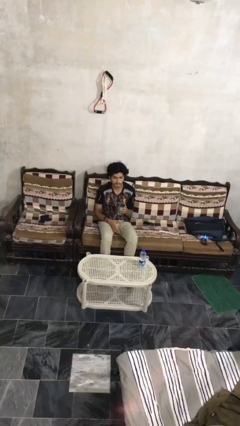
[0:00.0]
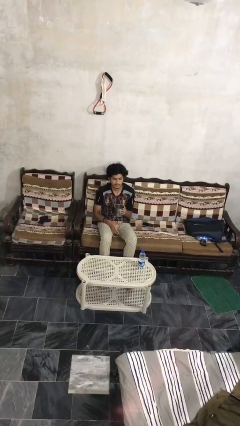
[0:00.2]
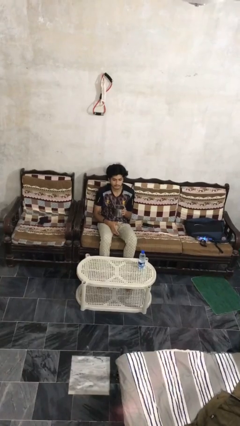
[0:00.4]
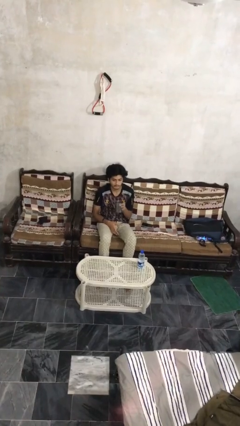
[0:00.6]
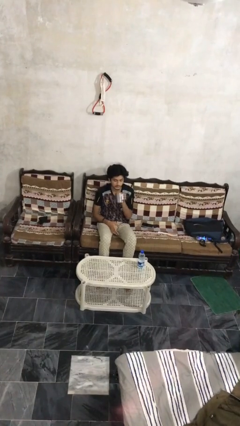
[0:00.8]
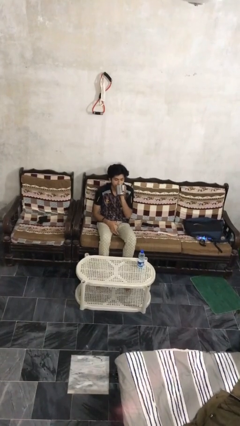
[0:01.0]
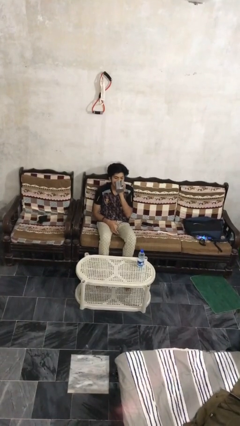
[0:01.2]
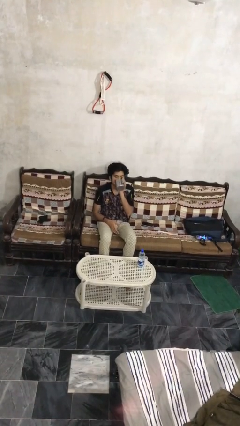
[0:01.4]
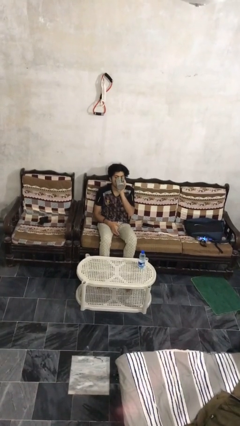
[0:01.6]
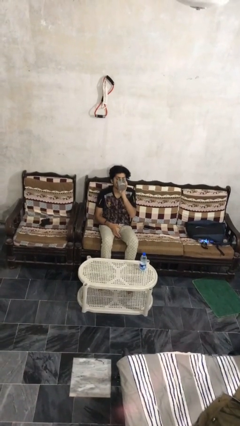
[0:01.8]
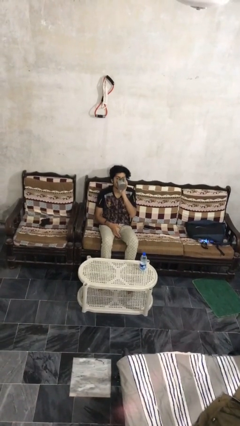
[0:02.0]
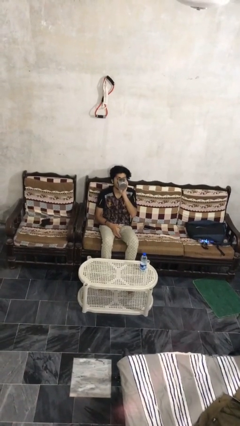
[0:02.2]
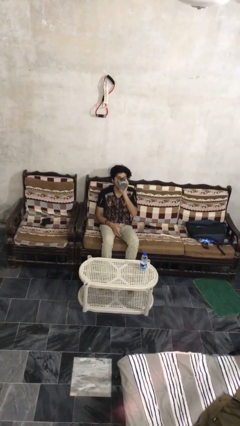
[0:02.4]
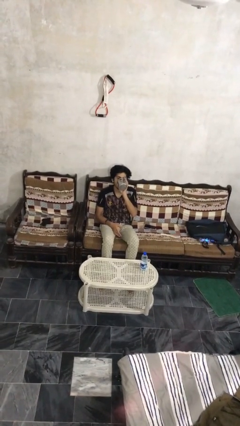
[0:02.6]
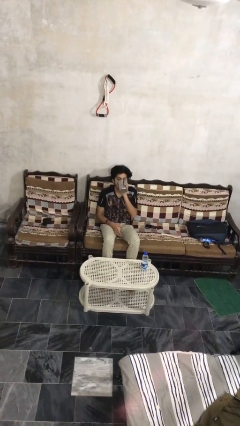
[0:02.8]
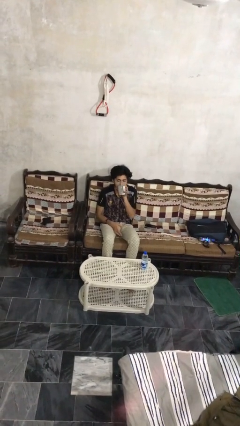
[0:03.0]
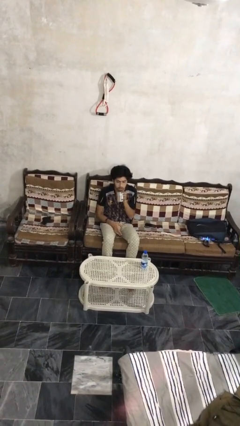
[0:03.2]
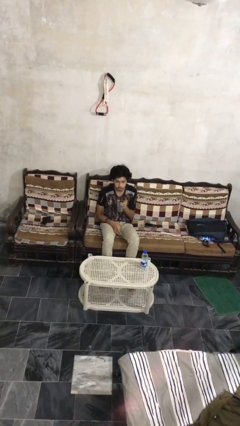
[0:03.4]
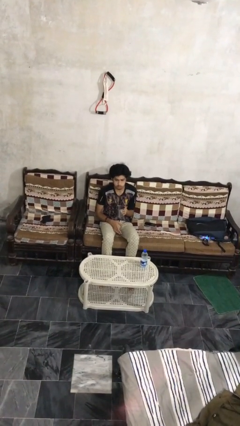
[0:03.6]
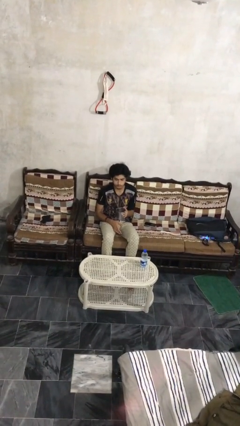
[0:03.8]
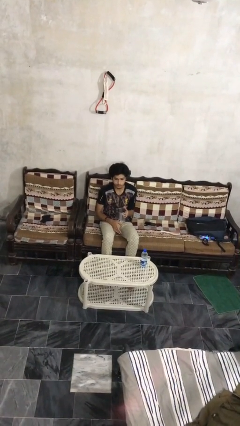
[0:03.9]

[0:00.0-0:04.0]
person drinks from mug

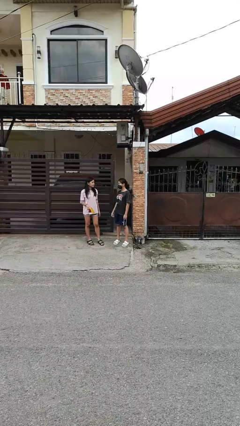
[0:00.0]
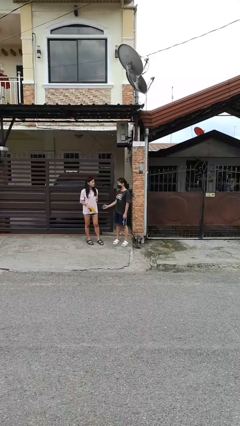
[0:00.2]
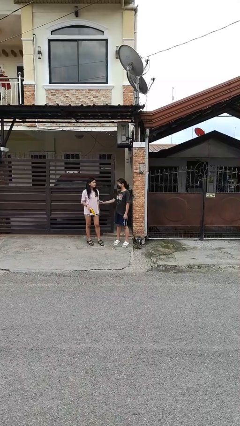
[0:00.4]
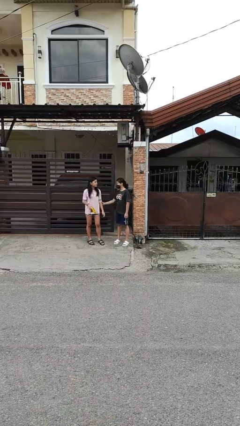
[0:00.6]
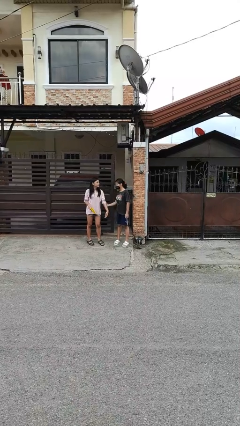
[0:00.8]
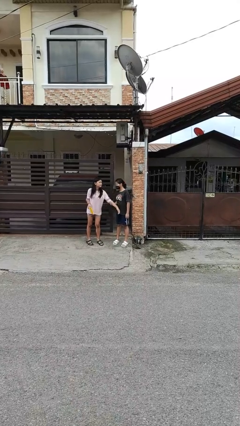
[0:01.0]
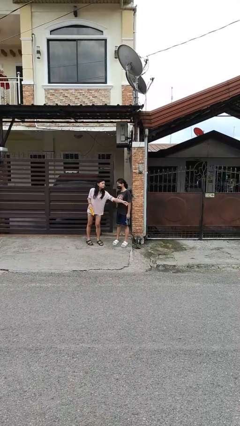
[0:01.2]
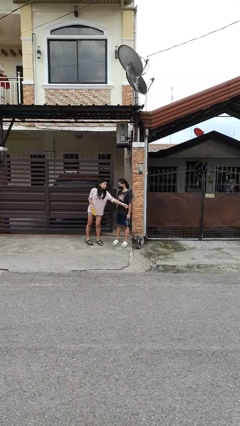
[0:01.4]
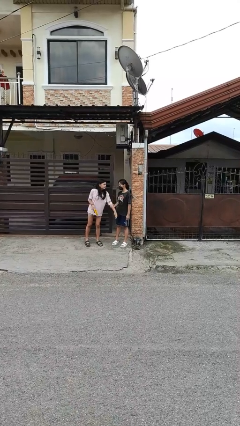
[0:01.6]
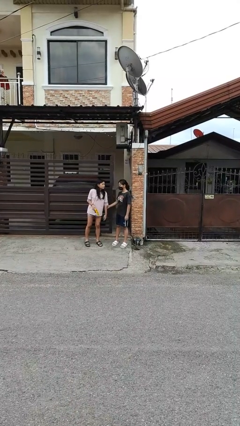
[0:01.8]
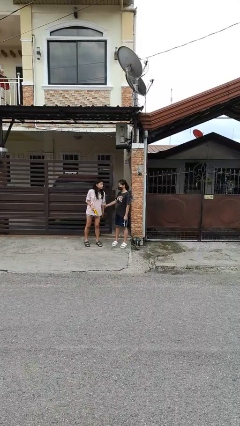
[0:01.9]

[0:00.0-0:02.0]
person grabs person by forearm

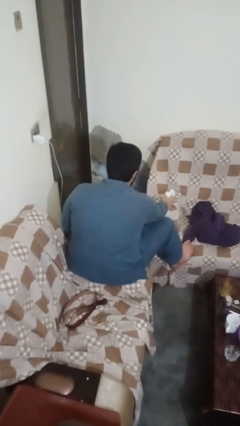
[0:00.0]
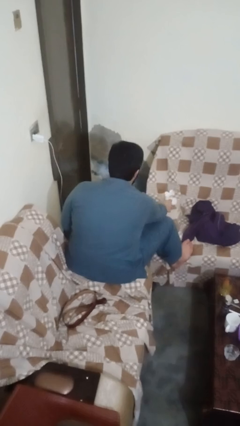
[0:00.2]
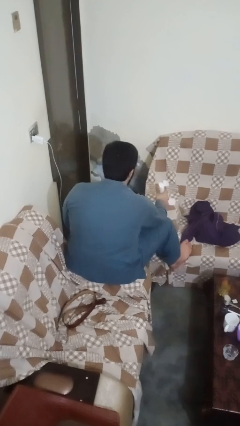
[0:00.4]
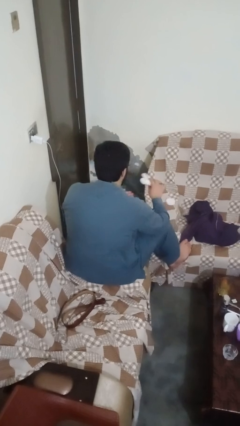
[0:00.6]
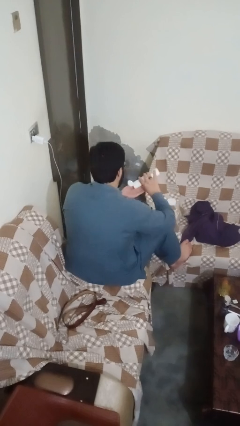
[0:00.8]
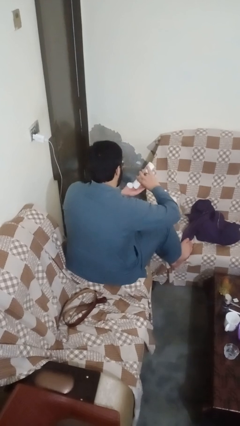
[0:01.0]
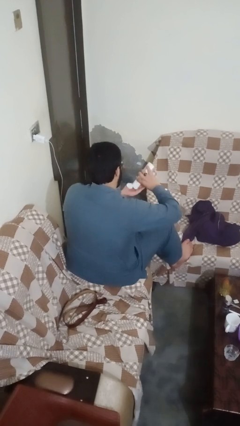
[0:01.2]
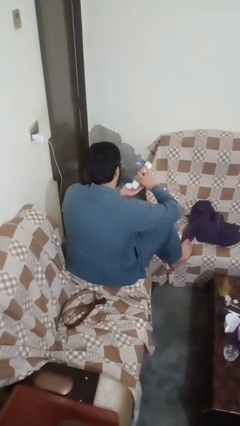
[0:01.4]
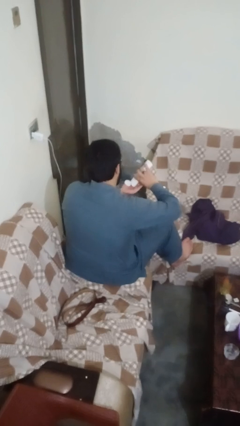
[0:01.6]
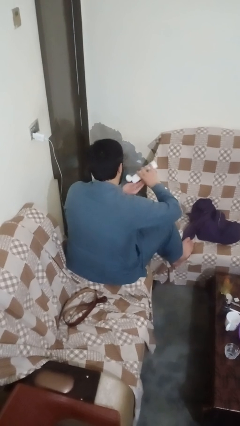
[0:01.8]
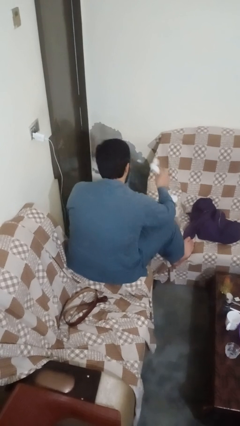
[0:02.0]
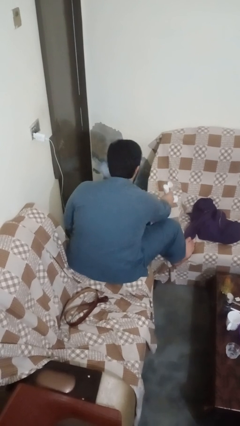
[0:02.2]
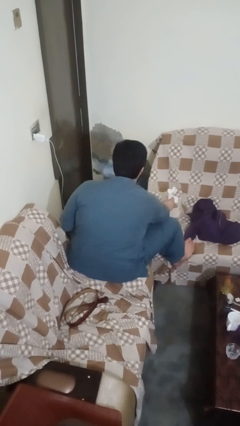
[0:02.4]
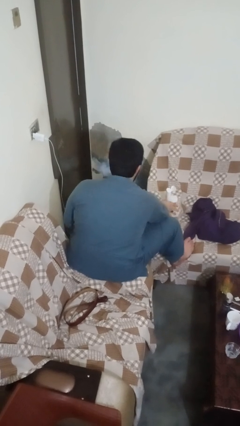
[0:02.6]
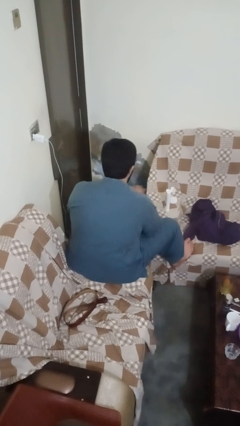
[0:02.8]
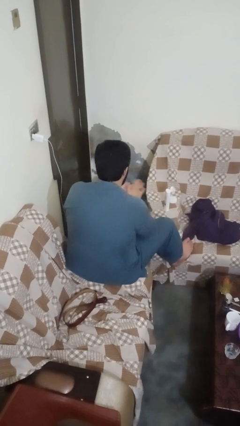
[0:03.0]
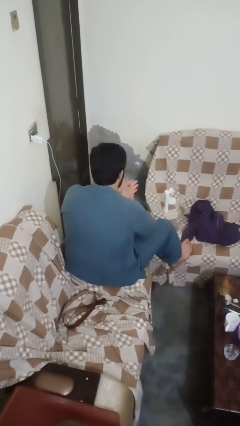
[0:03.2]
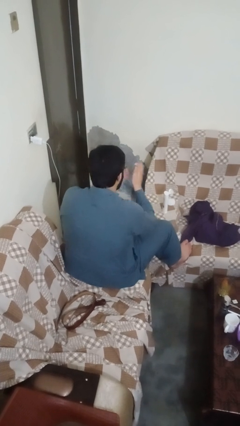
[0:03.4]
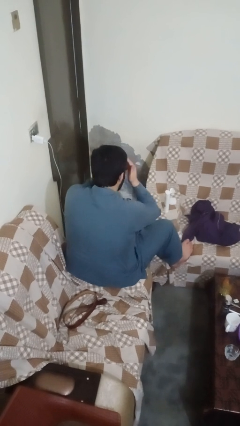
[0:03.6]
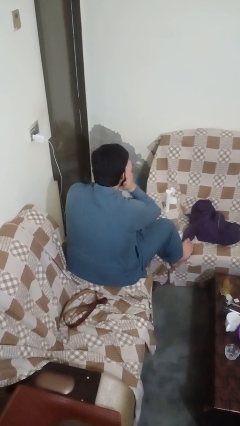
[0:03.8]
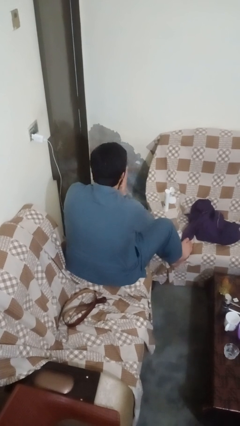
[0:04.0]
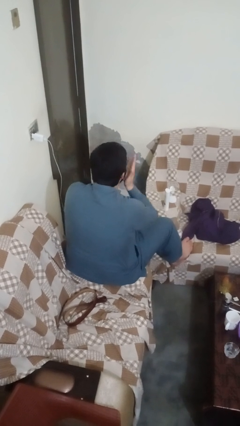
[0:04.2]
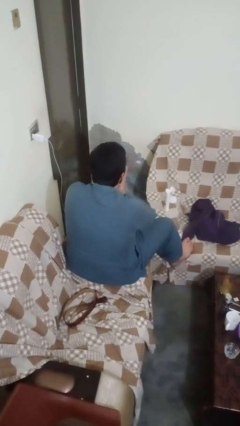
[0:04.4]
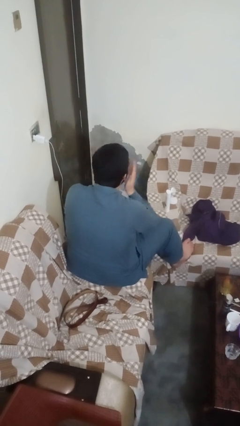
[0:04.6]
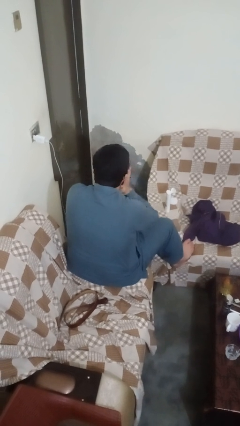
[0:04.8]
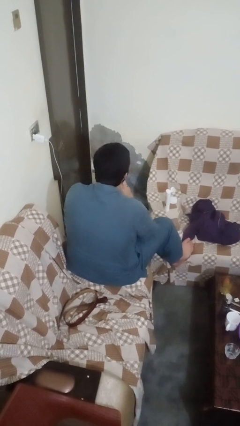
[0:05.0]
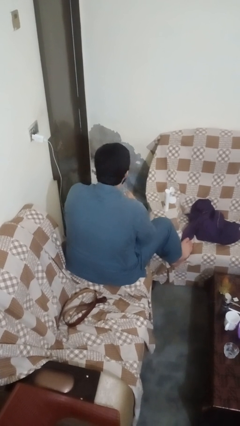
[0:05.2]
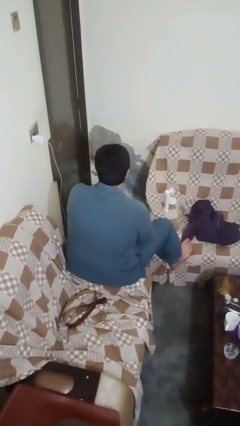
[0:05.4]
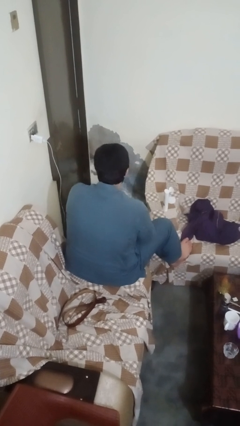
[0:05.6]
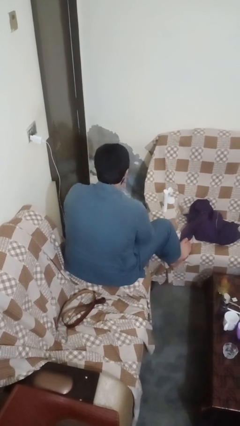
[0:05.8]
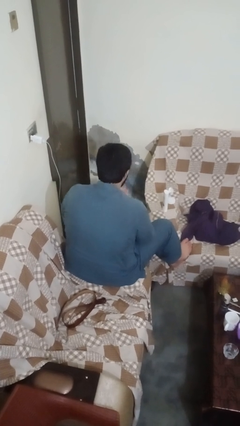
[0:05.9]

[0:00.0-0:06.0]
person applies facial moisturizer

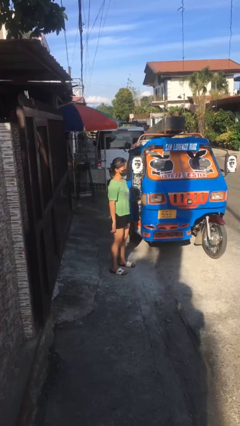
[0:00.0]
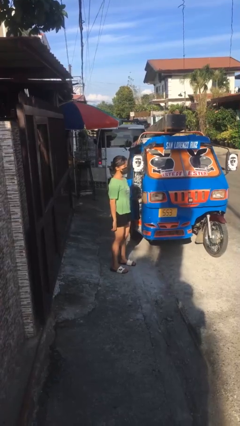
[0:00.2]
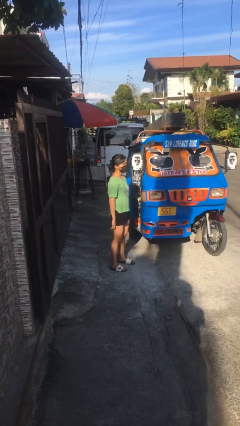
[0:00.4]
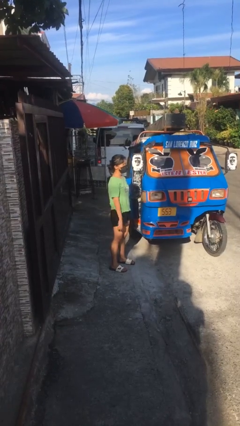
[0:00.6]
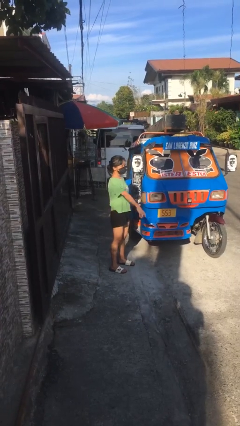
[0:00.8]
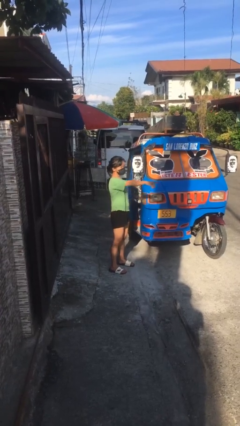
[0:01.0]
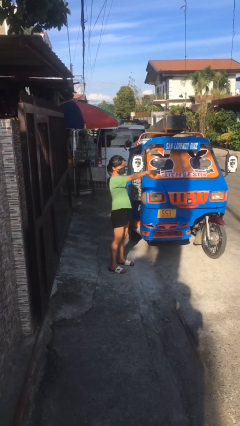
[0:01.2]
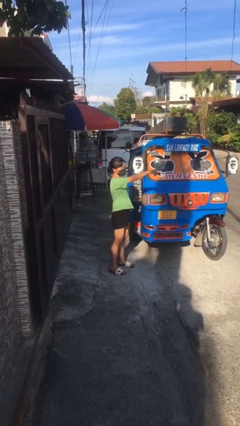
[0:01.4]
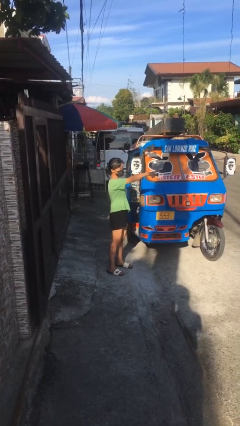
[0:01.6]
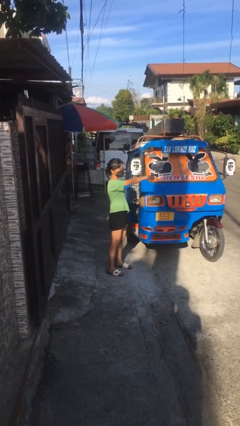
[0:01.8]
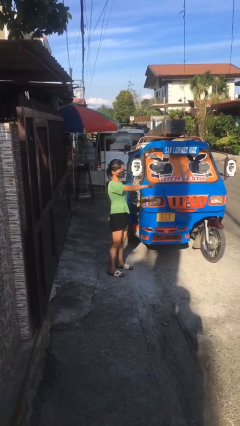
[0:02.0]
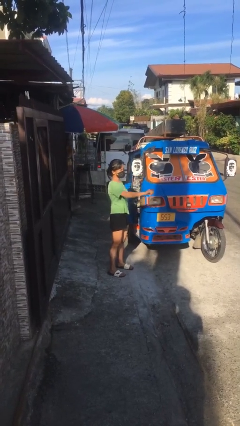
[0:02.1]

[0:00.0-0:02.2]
person points at person

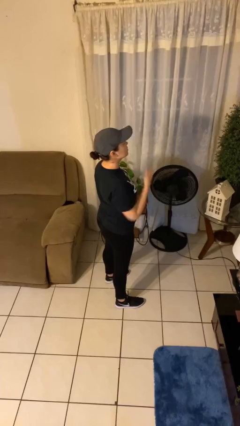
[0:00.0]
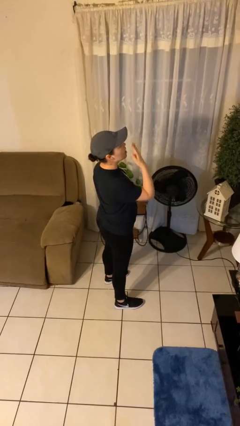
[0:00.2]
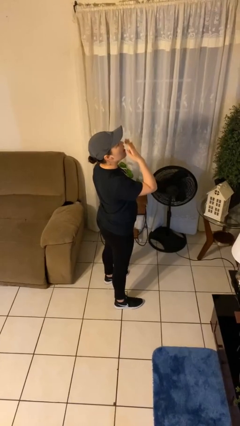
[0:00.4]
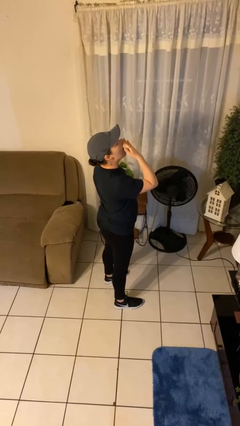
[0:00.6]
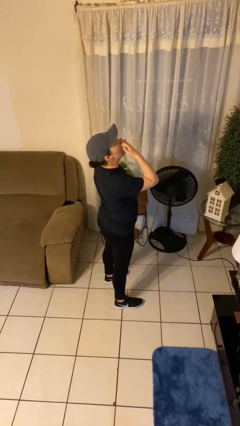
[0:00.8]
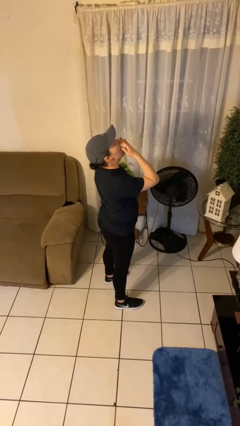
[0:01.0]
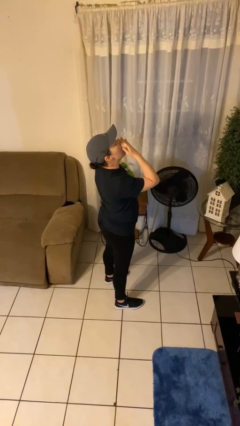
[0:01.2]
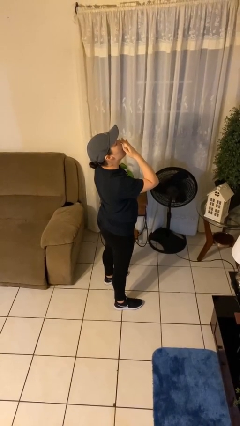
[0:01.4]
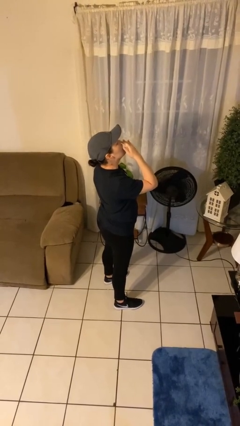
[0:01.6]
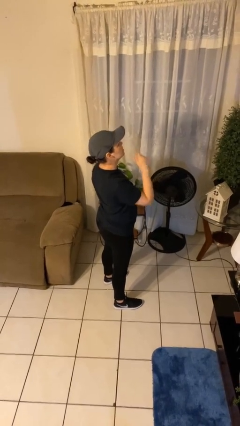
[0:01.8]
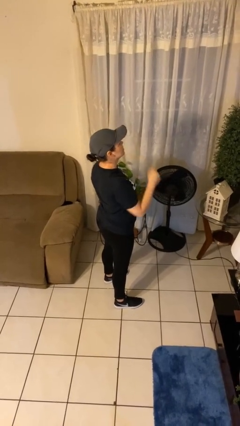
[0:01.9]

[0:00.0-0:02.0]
person yawns

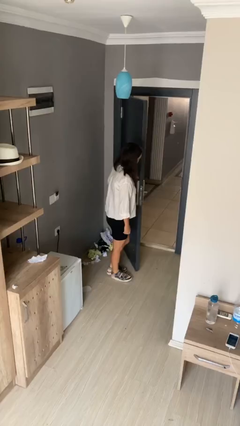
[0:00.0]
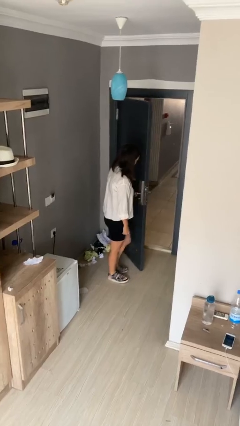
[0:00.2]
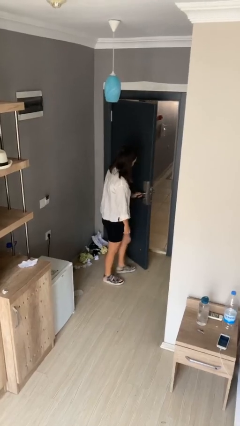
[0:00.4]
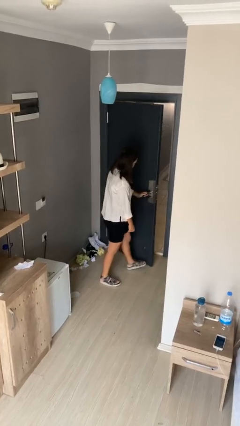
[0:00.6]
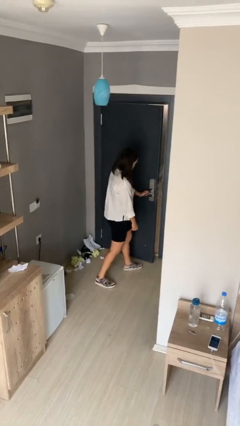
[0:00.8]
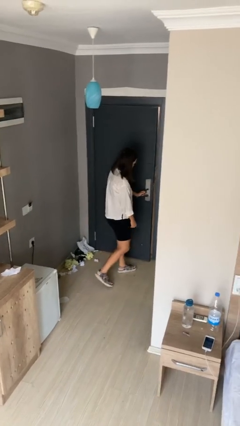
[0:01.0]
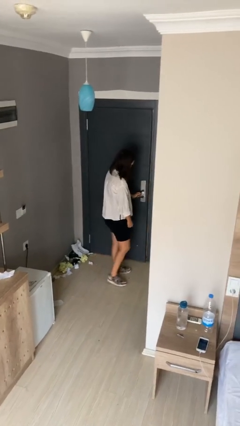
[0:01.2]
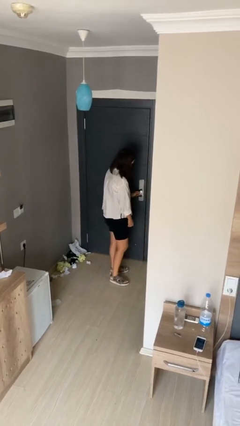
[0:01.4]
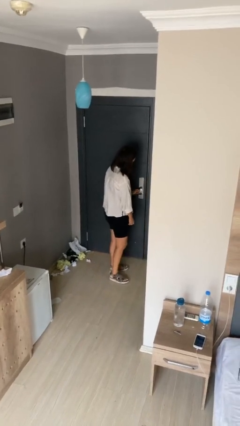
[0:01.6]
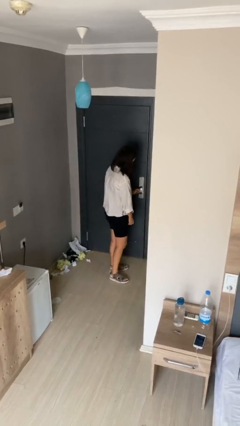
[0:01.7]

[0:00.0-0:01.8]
person closes facility door
